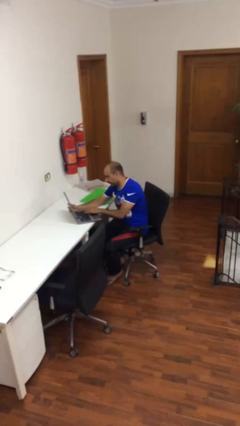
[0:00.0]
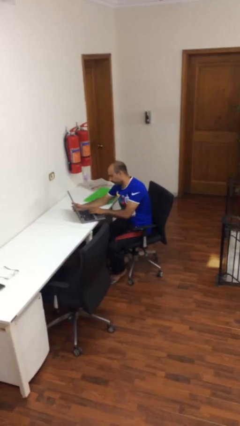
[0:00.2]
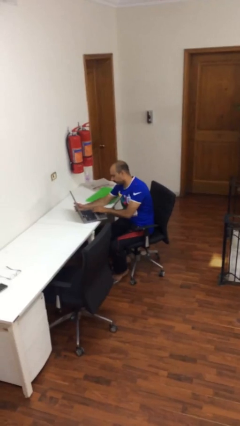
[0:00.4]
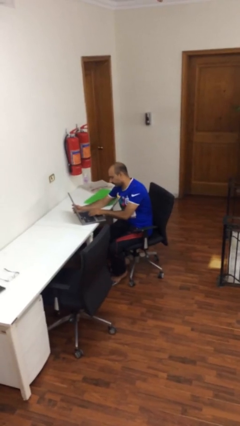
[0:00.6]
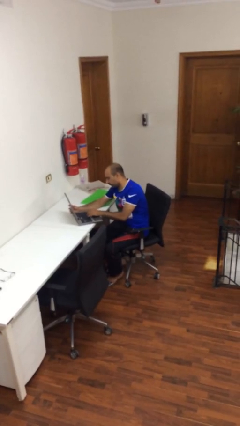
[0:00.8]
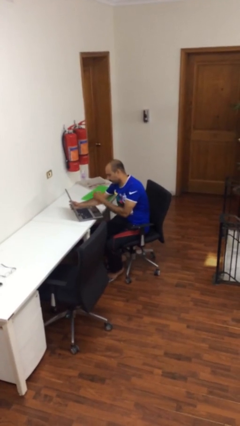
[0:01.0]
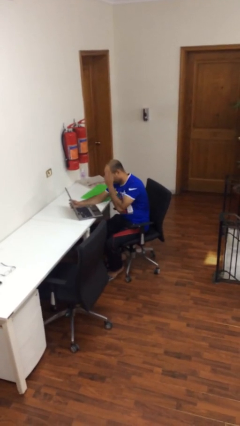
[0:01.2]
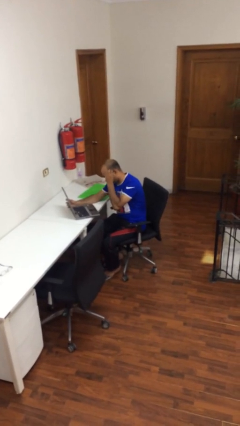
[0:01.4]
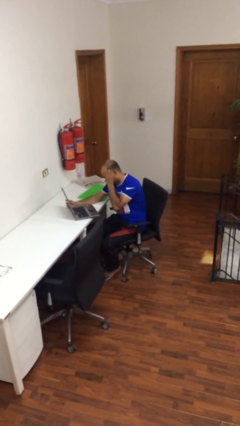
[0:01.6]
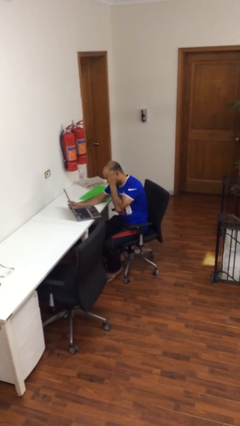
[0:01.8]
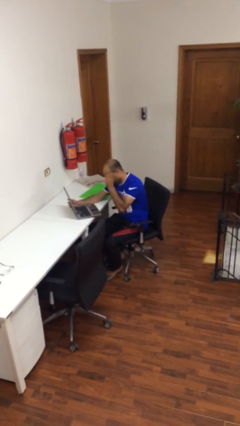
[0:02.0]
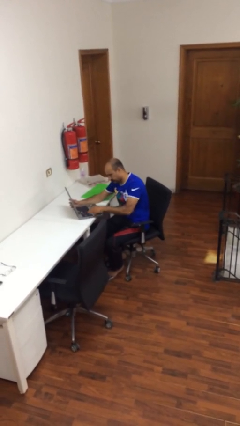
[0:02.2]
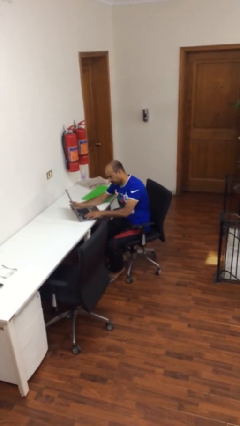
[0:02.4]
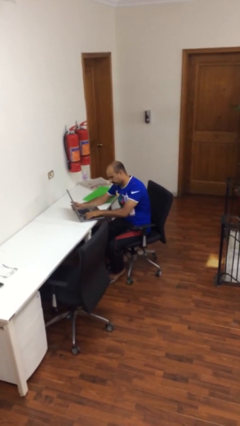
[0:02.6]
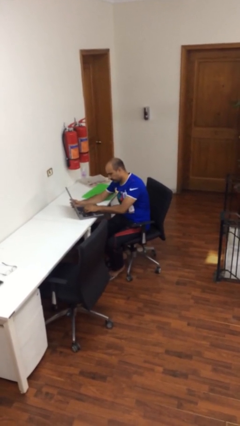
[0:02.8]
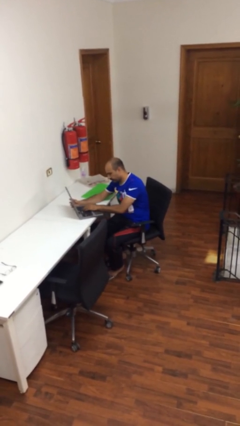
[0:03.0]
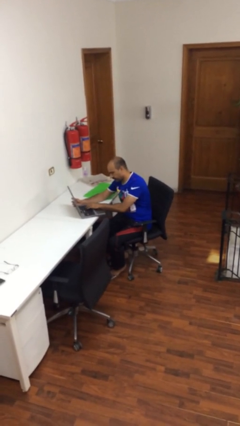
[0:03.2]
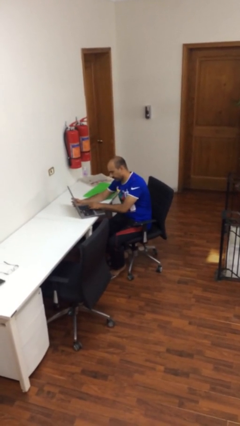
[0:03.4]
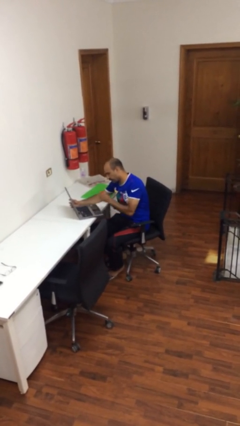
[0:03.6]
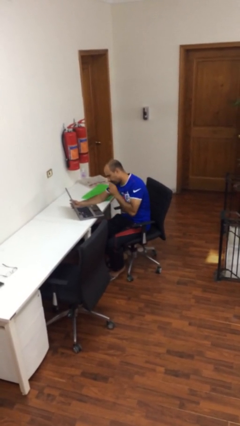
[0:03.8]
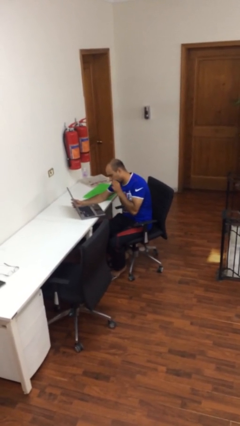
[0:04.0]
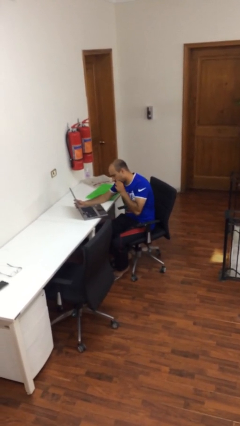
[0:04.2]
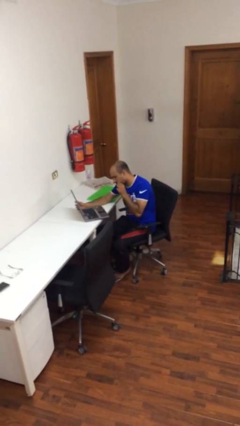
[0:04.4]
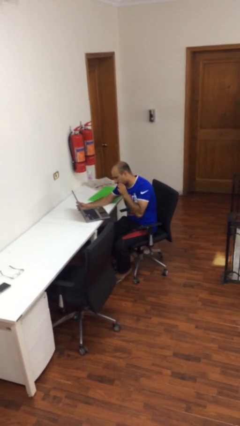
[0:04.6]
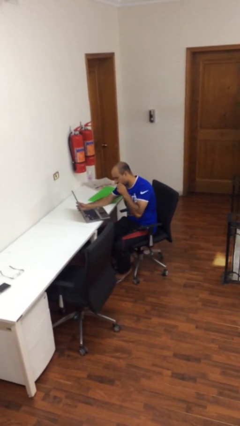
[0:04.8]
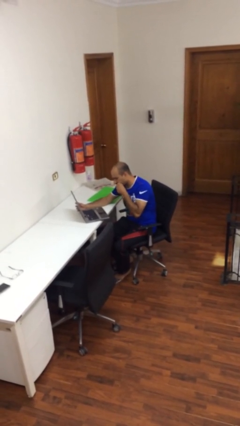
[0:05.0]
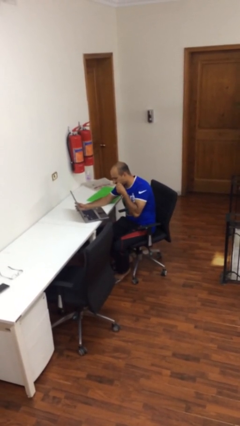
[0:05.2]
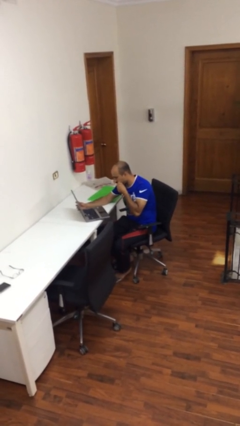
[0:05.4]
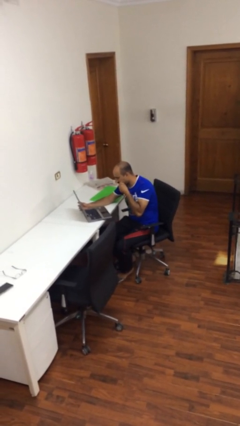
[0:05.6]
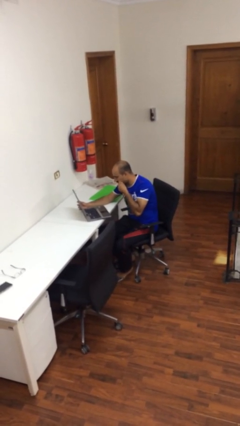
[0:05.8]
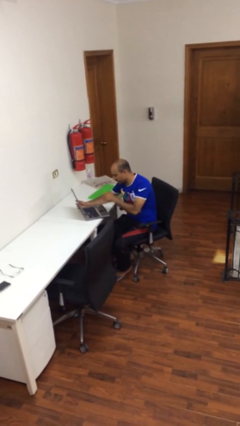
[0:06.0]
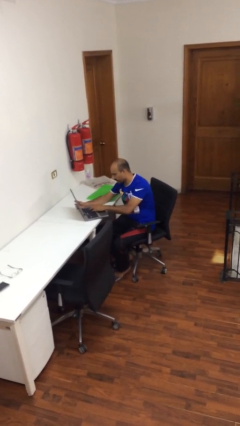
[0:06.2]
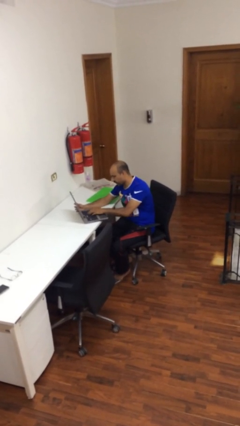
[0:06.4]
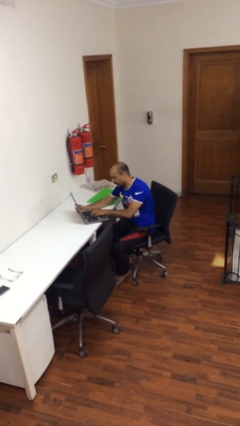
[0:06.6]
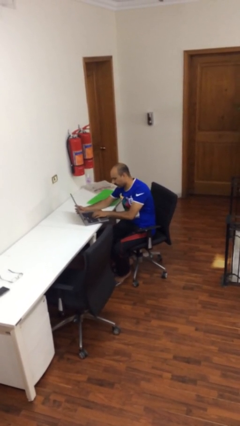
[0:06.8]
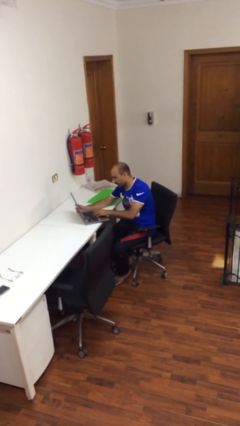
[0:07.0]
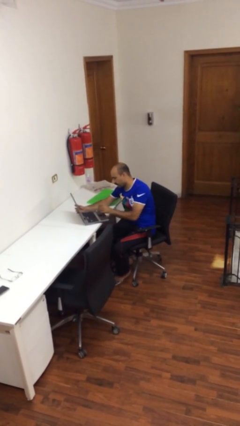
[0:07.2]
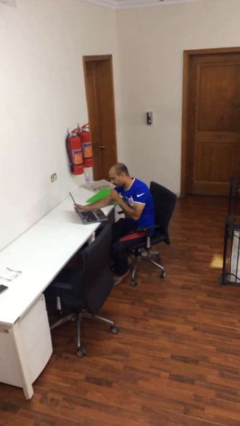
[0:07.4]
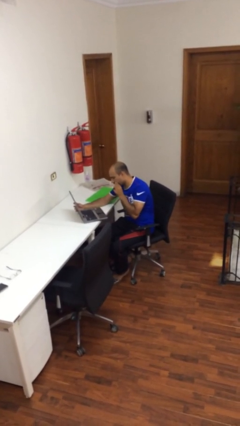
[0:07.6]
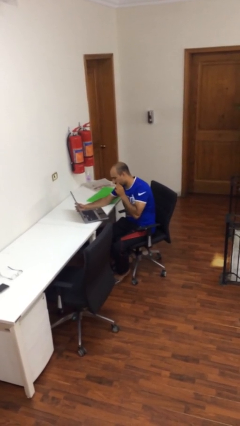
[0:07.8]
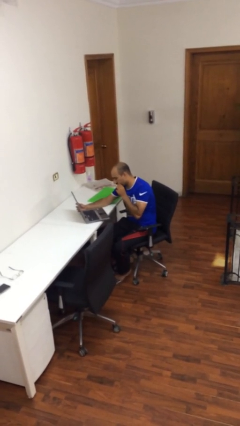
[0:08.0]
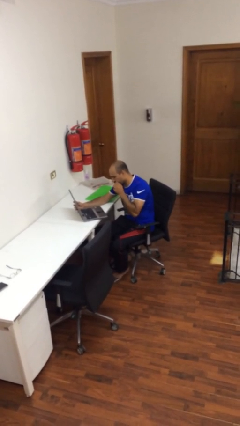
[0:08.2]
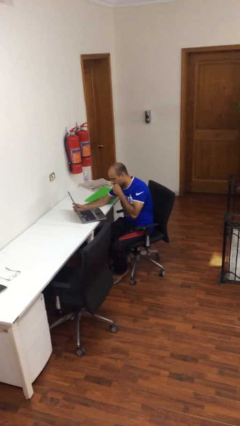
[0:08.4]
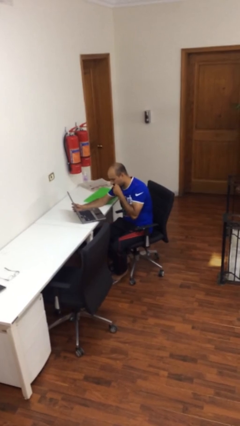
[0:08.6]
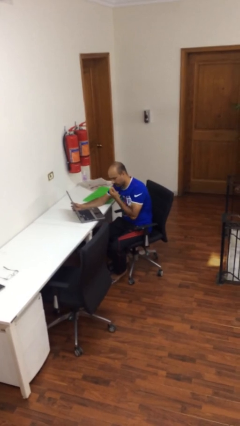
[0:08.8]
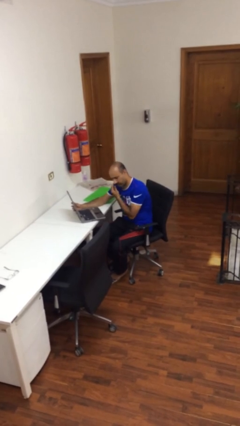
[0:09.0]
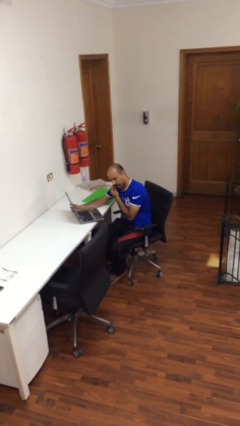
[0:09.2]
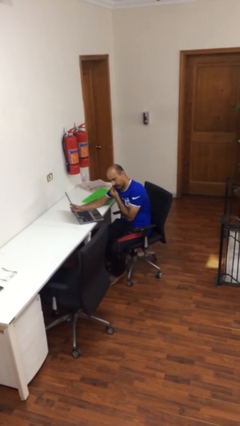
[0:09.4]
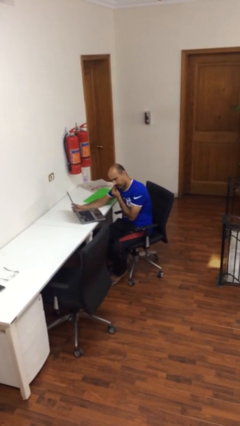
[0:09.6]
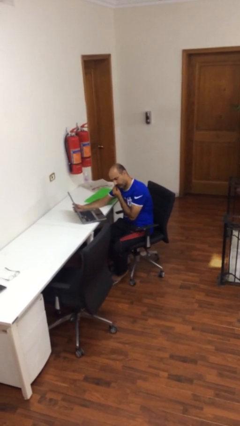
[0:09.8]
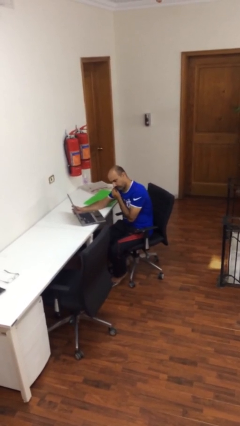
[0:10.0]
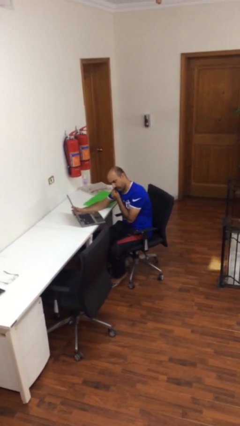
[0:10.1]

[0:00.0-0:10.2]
person interacts with laptop

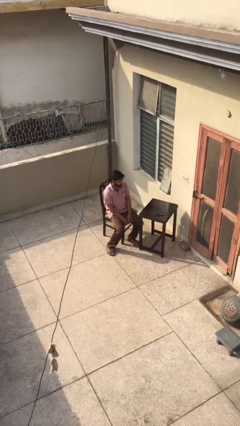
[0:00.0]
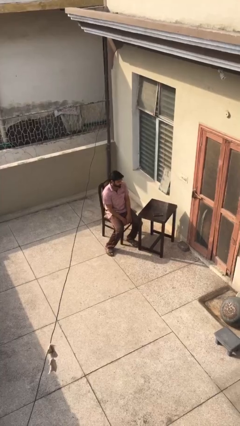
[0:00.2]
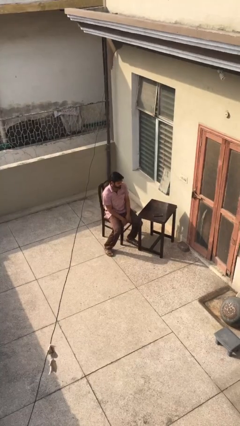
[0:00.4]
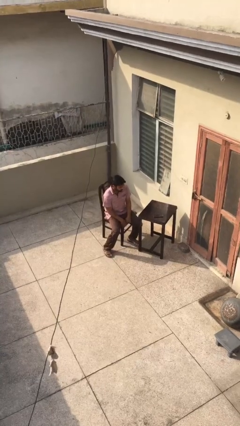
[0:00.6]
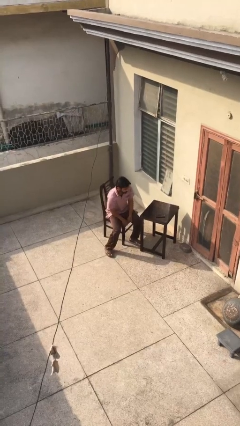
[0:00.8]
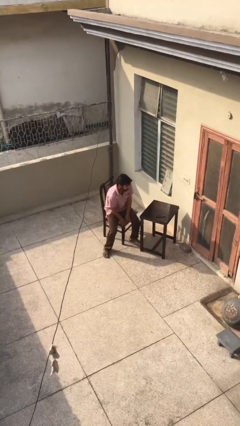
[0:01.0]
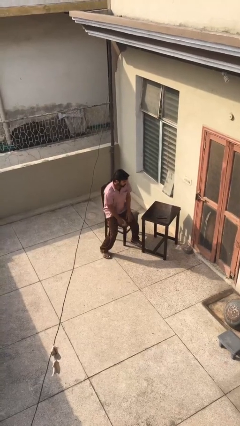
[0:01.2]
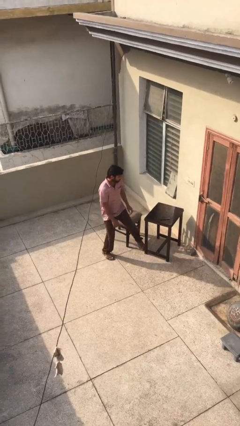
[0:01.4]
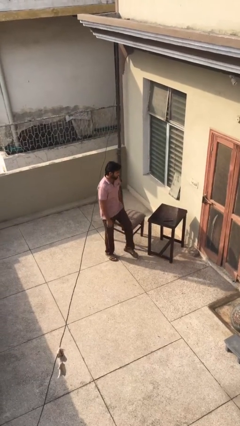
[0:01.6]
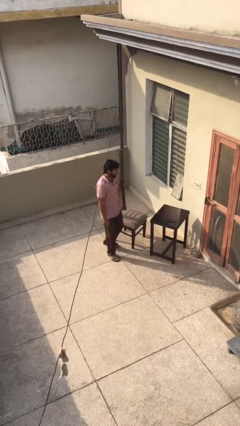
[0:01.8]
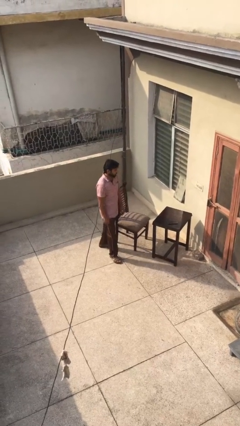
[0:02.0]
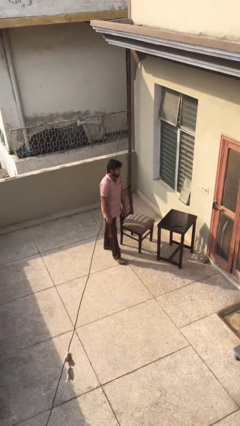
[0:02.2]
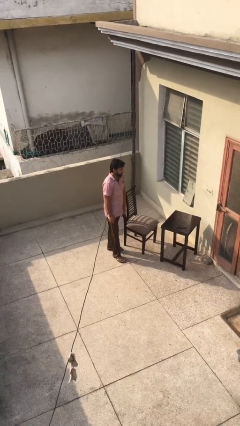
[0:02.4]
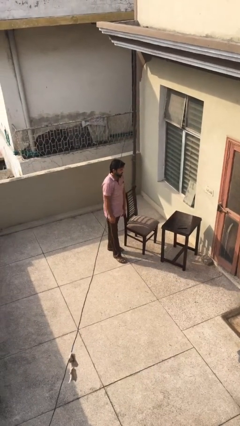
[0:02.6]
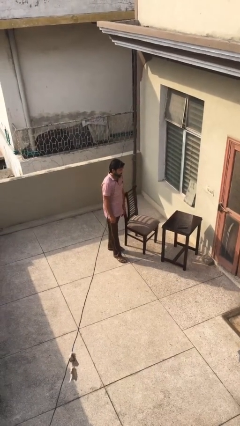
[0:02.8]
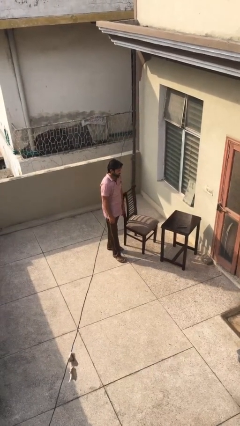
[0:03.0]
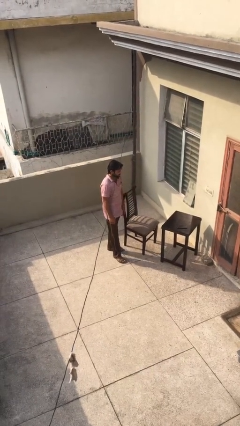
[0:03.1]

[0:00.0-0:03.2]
person stands up

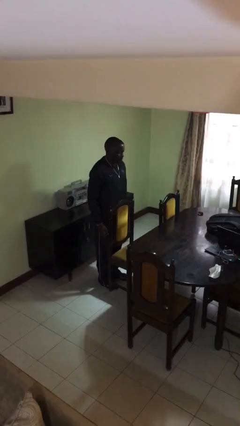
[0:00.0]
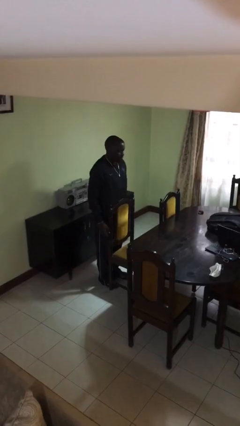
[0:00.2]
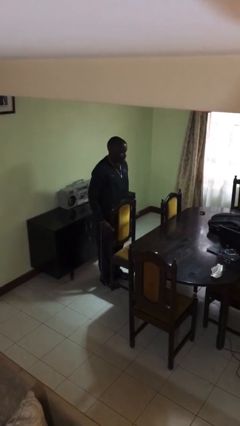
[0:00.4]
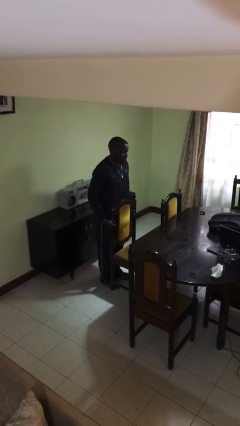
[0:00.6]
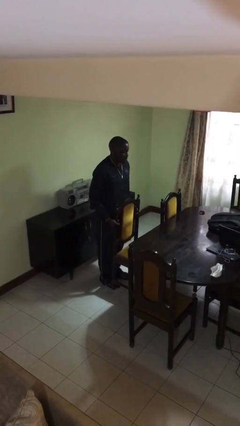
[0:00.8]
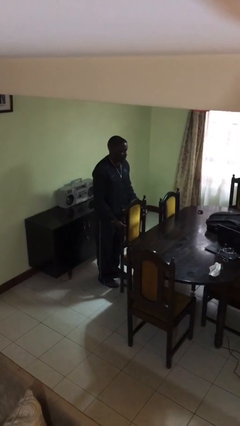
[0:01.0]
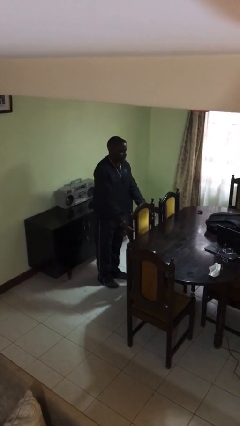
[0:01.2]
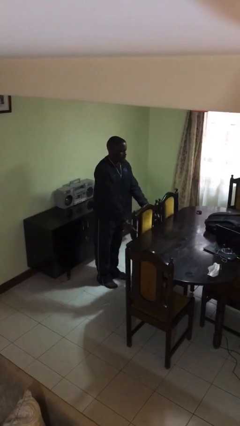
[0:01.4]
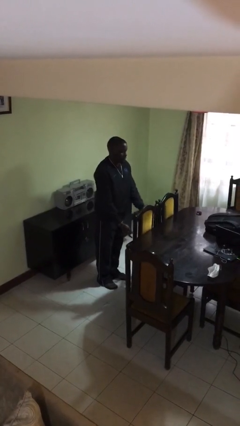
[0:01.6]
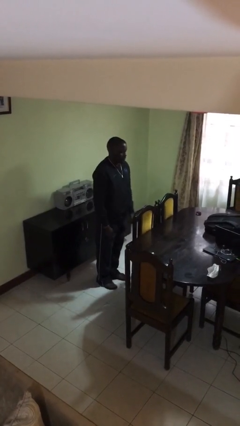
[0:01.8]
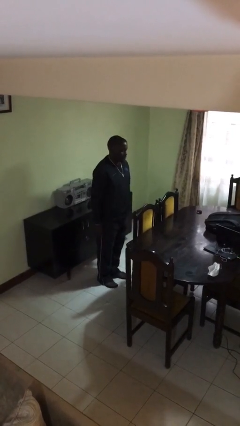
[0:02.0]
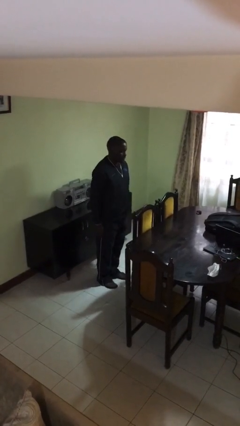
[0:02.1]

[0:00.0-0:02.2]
person pushes in chair

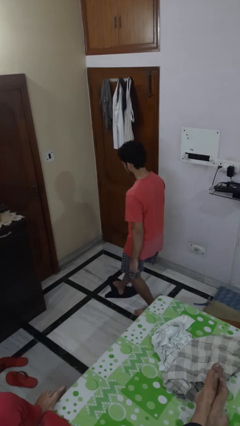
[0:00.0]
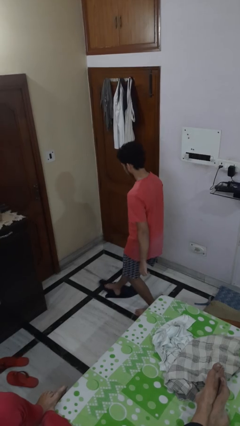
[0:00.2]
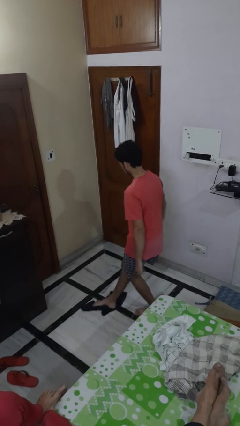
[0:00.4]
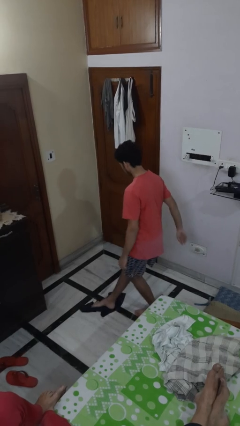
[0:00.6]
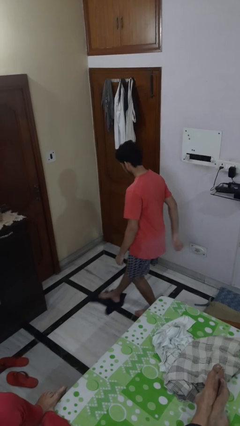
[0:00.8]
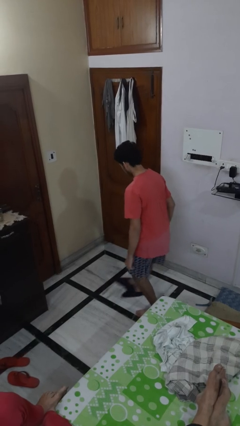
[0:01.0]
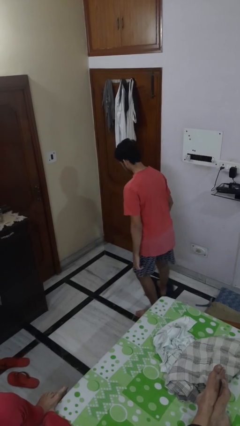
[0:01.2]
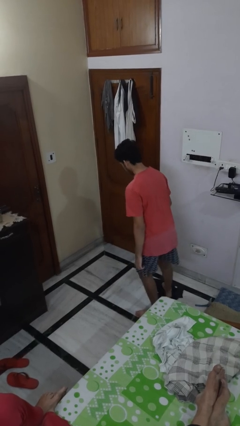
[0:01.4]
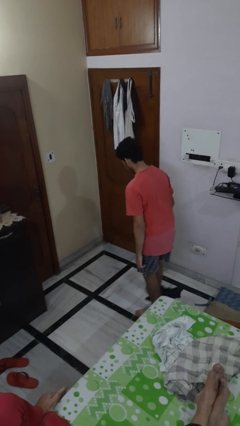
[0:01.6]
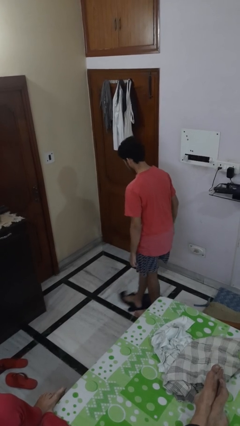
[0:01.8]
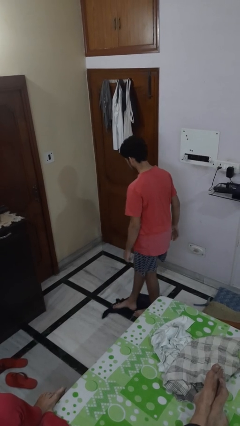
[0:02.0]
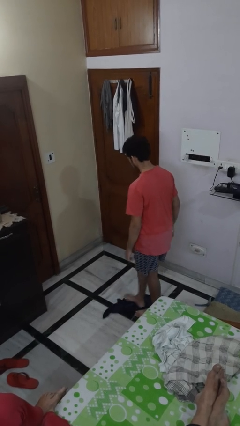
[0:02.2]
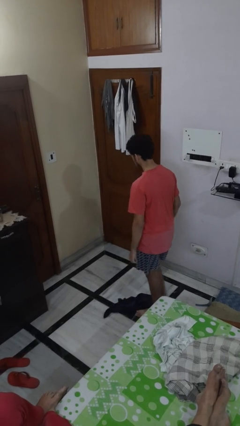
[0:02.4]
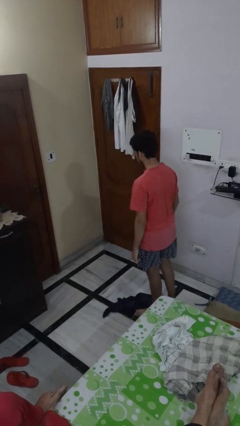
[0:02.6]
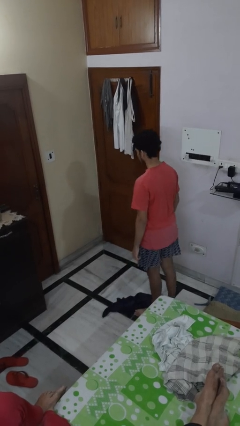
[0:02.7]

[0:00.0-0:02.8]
person mops
